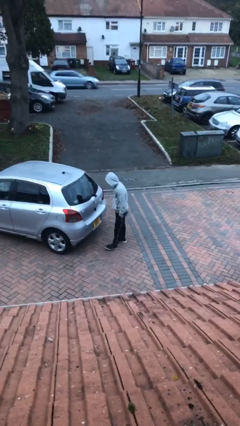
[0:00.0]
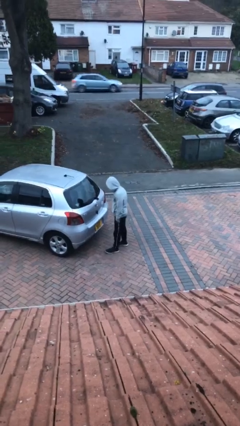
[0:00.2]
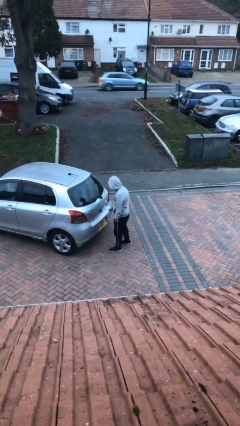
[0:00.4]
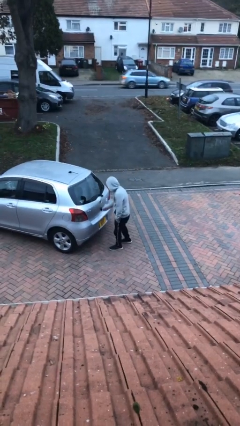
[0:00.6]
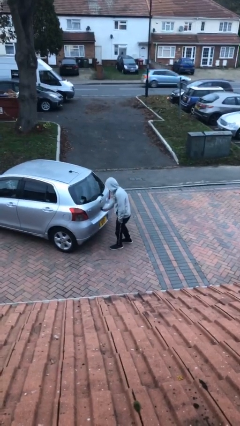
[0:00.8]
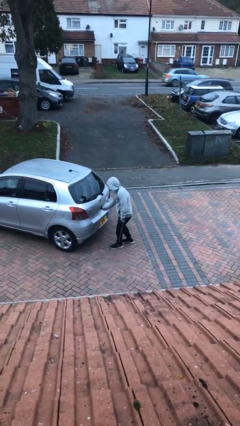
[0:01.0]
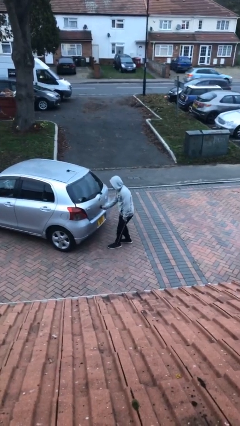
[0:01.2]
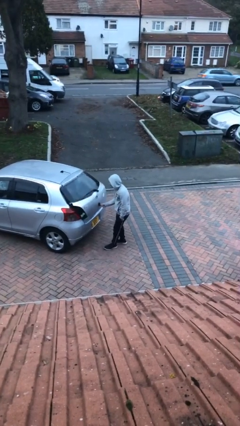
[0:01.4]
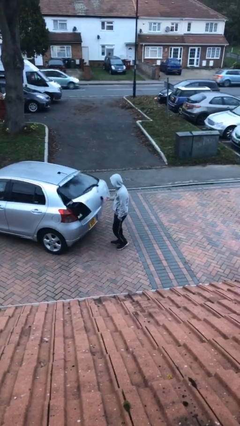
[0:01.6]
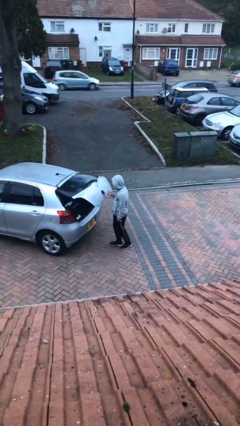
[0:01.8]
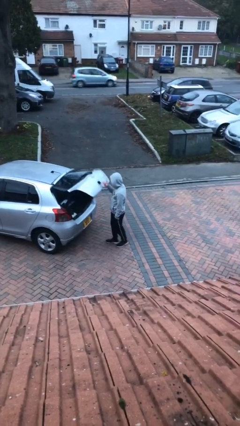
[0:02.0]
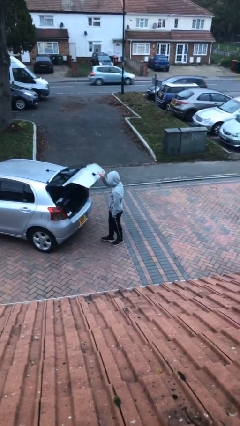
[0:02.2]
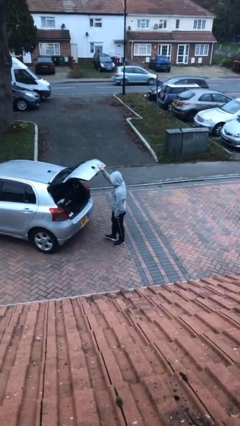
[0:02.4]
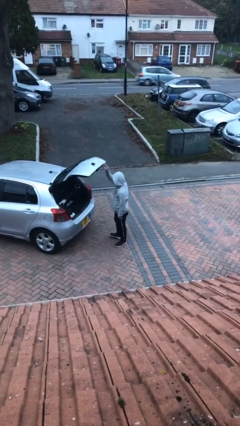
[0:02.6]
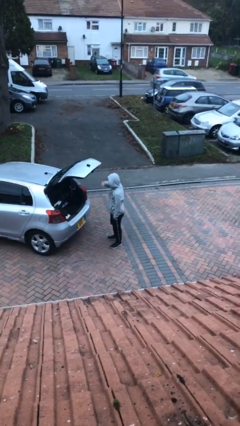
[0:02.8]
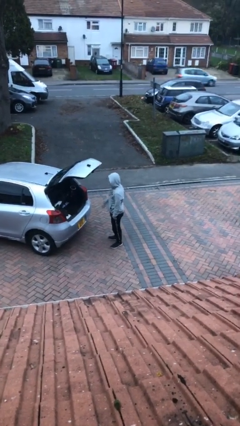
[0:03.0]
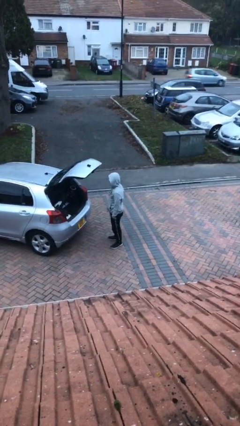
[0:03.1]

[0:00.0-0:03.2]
person opens car trunk

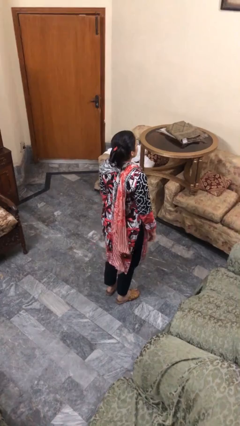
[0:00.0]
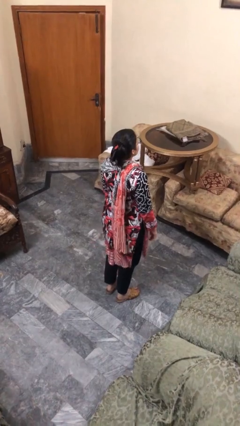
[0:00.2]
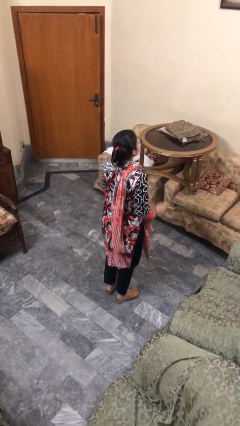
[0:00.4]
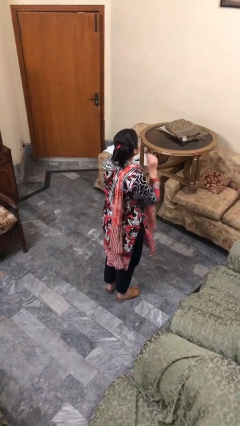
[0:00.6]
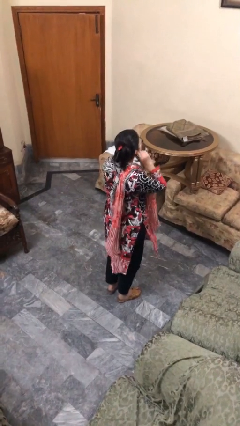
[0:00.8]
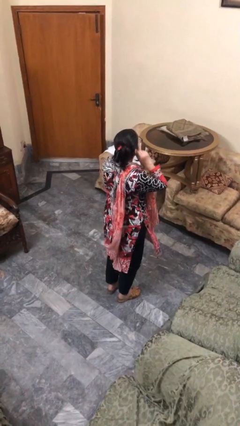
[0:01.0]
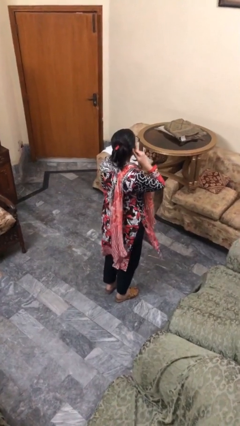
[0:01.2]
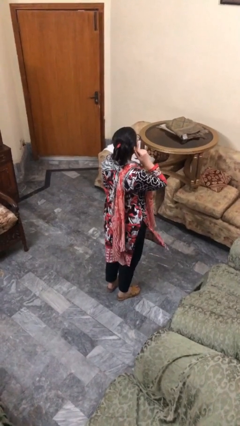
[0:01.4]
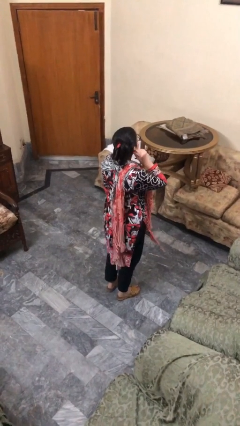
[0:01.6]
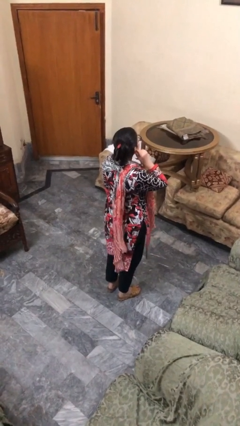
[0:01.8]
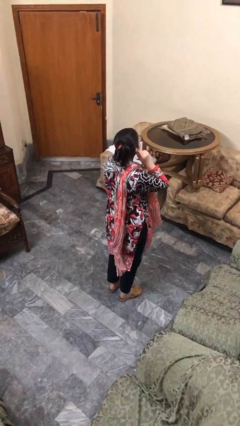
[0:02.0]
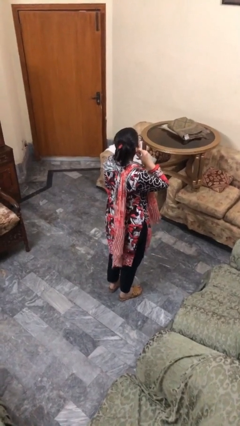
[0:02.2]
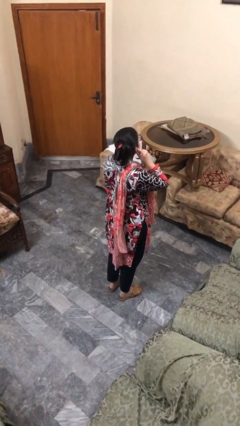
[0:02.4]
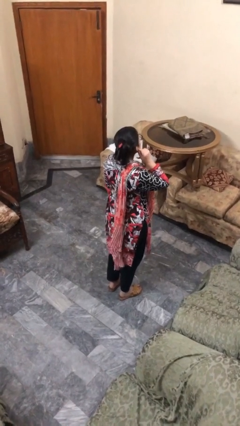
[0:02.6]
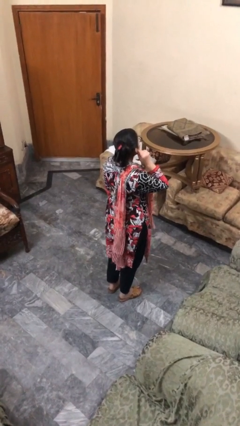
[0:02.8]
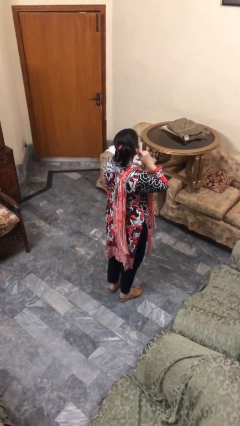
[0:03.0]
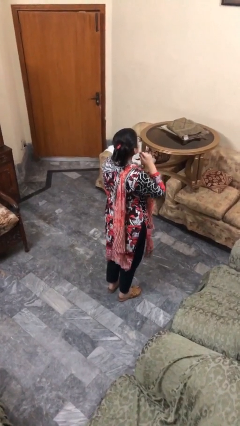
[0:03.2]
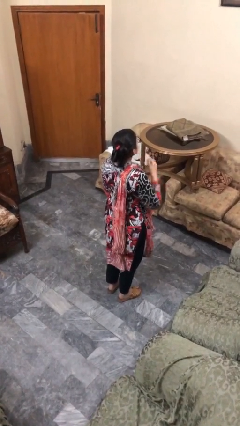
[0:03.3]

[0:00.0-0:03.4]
person touches earlobe

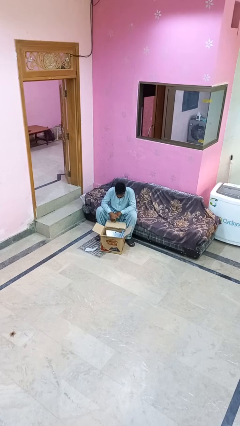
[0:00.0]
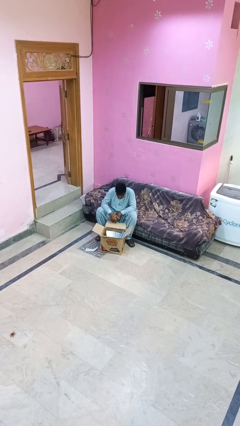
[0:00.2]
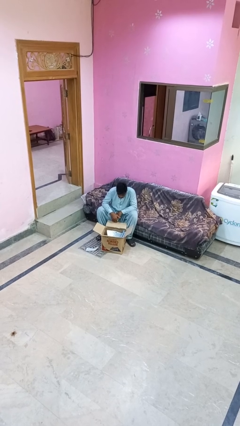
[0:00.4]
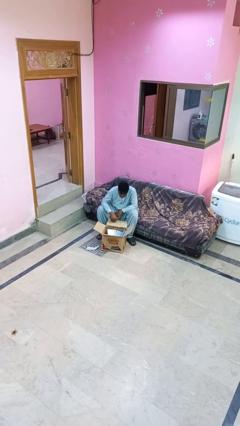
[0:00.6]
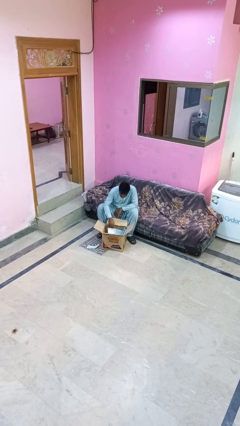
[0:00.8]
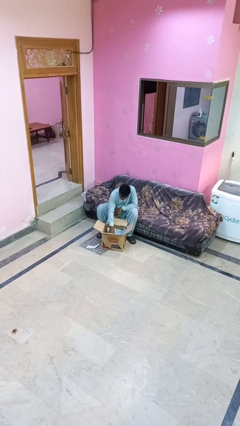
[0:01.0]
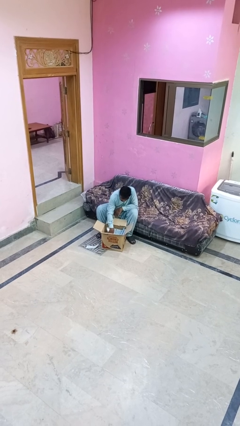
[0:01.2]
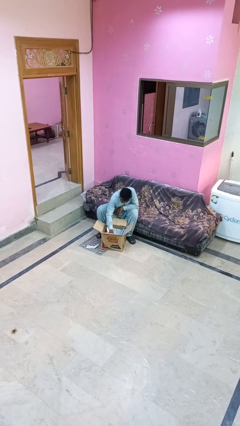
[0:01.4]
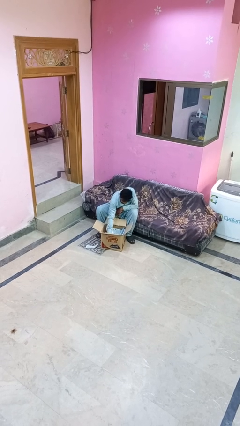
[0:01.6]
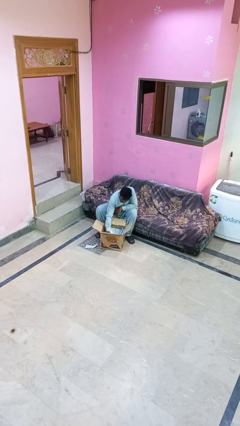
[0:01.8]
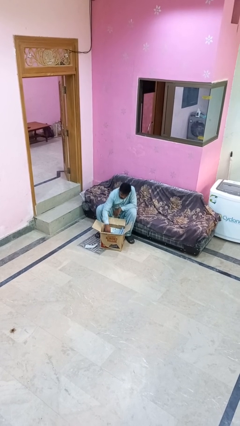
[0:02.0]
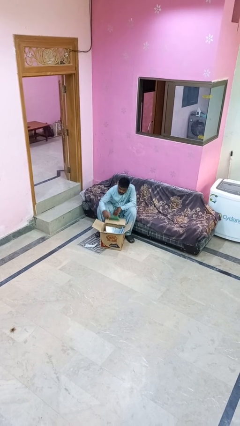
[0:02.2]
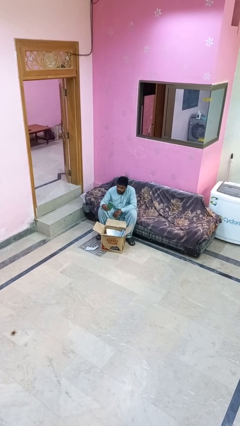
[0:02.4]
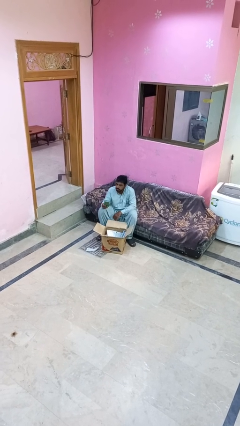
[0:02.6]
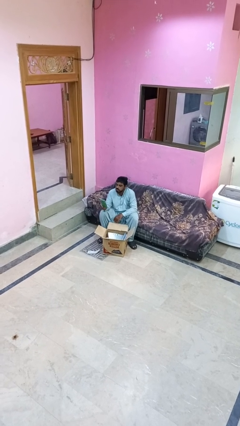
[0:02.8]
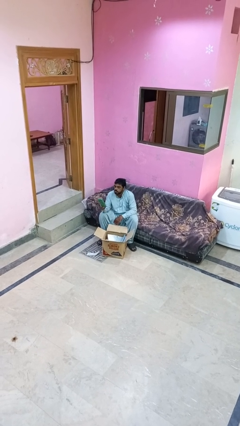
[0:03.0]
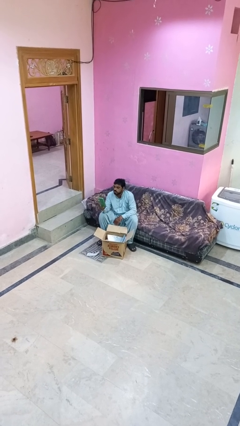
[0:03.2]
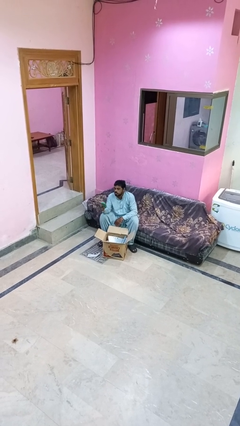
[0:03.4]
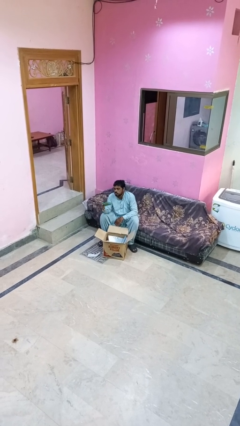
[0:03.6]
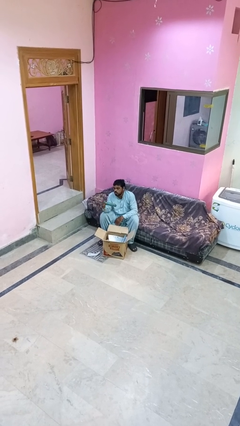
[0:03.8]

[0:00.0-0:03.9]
person takes object from box

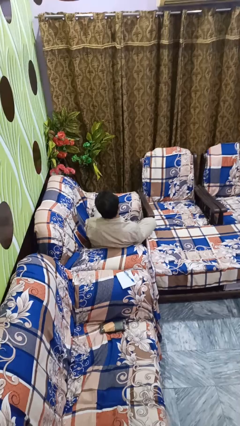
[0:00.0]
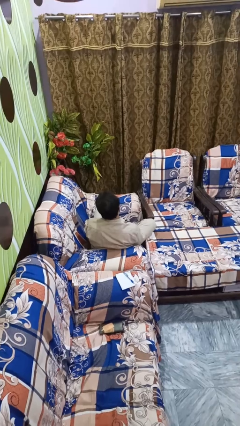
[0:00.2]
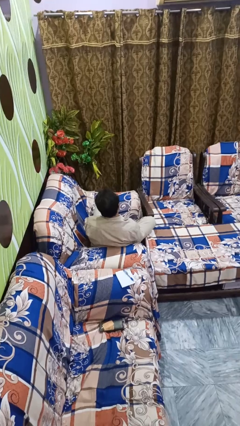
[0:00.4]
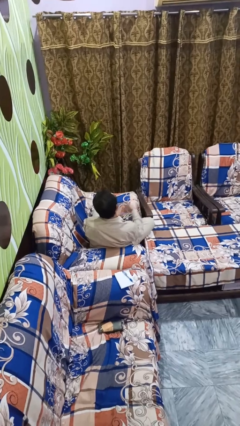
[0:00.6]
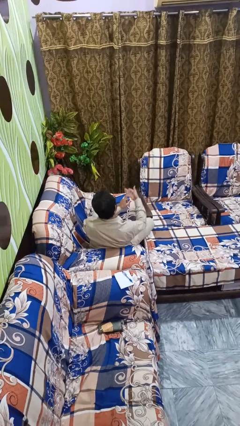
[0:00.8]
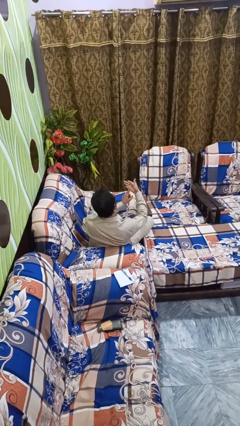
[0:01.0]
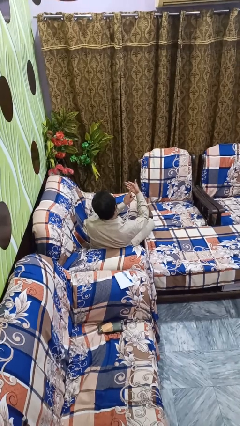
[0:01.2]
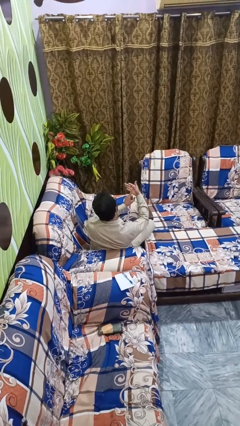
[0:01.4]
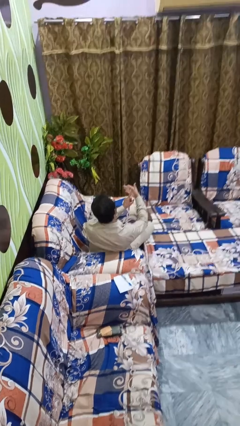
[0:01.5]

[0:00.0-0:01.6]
person gestures number one

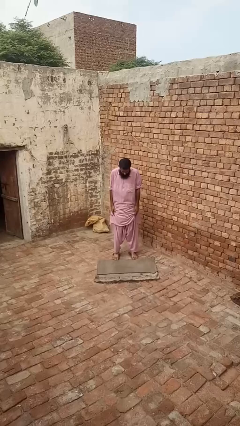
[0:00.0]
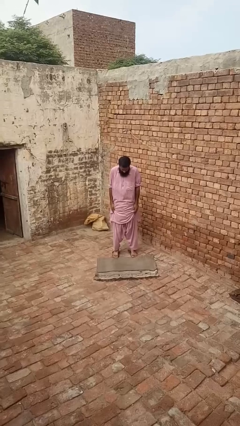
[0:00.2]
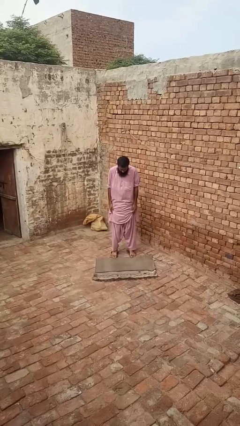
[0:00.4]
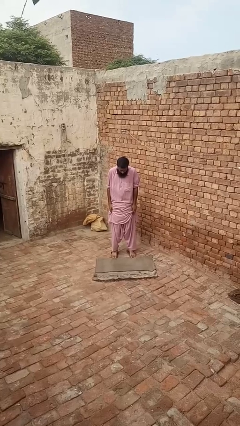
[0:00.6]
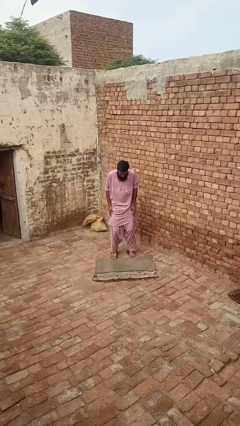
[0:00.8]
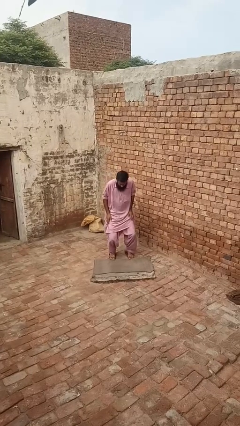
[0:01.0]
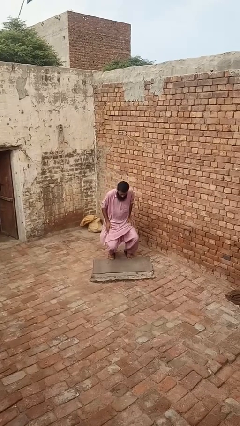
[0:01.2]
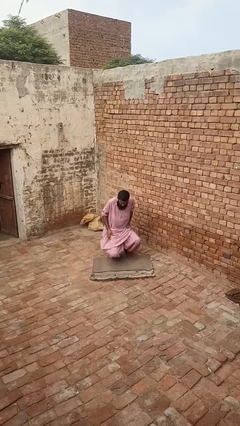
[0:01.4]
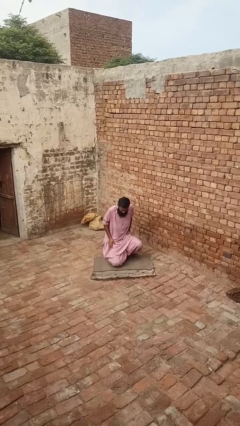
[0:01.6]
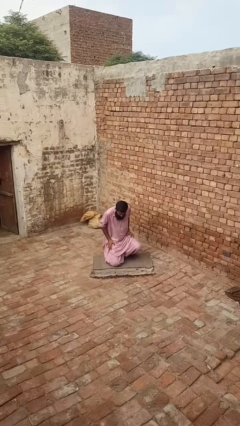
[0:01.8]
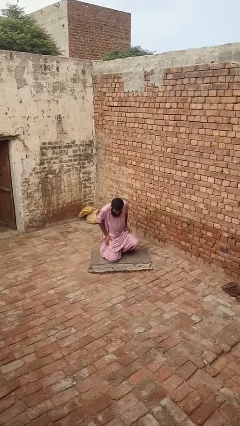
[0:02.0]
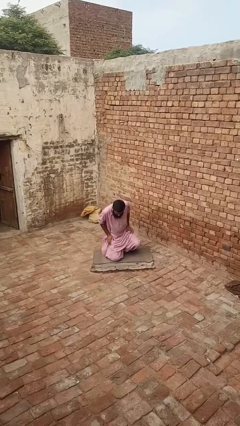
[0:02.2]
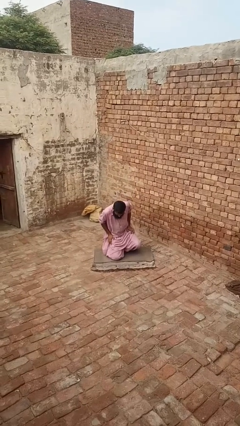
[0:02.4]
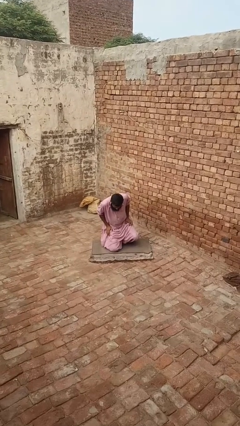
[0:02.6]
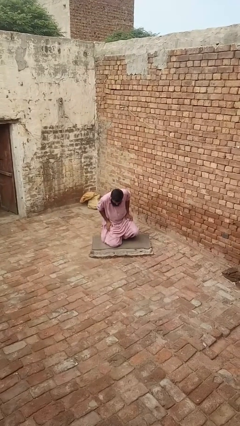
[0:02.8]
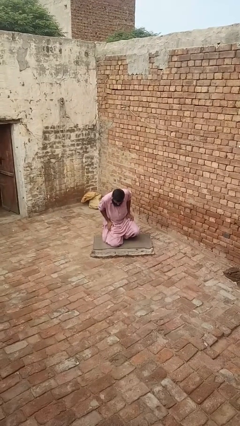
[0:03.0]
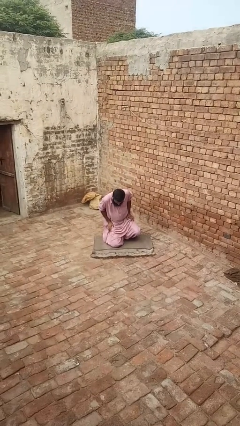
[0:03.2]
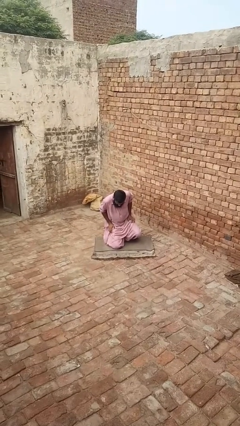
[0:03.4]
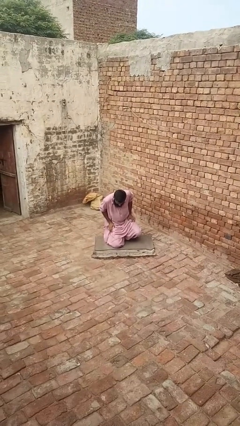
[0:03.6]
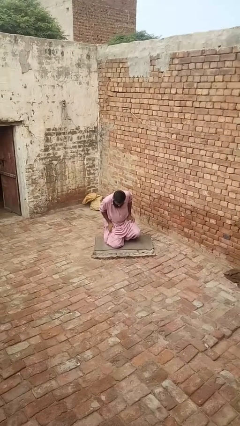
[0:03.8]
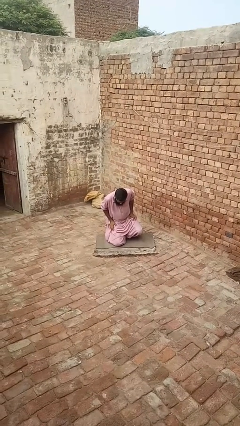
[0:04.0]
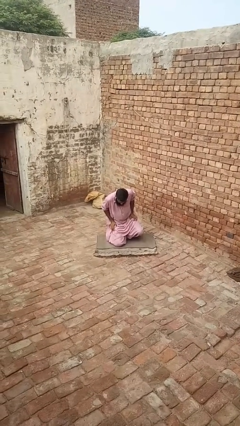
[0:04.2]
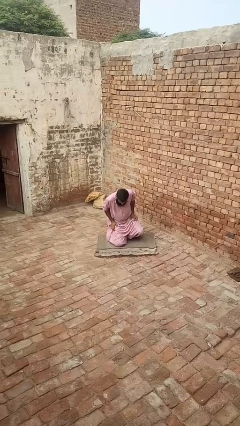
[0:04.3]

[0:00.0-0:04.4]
person kneels

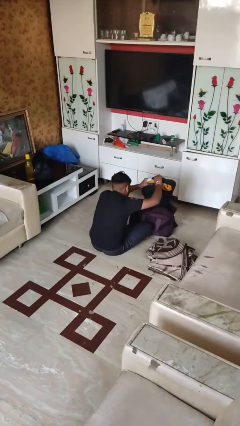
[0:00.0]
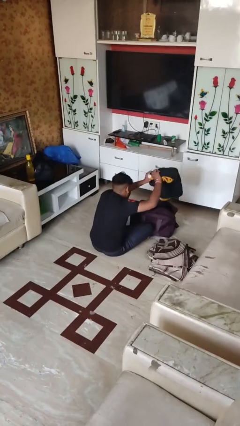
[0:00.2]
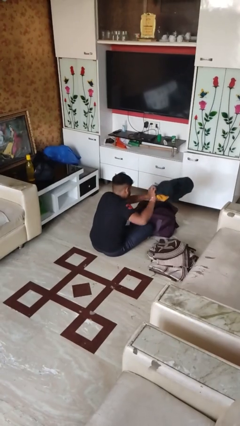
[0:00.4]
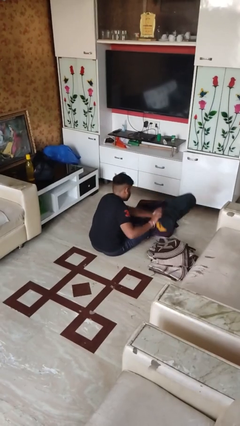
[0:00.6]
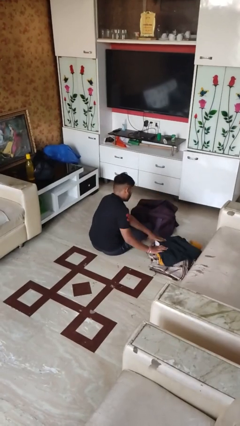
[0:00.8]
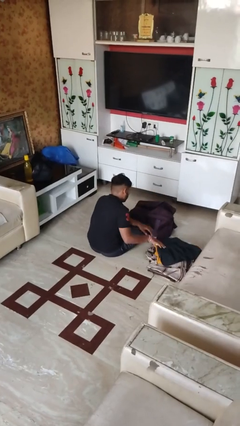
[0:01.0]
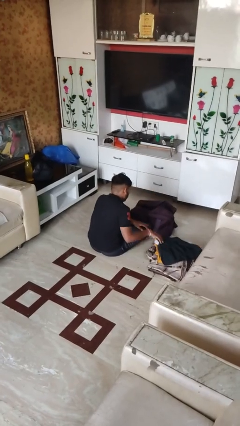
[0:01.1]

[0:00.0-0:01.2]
person unloads clothes from suitcase

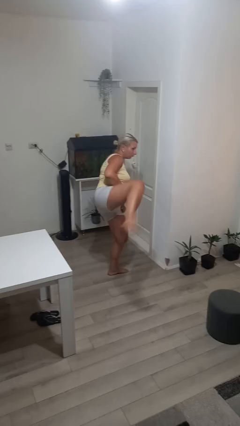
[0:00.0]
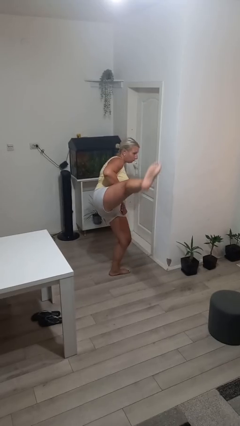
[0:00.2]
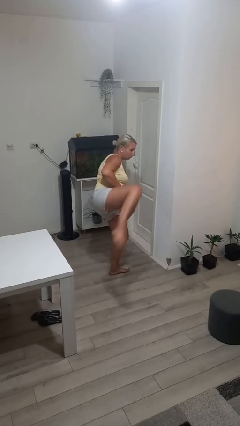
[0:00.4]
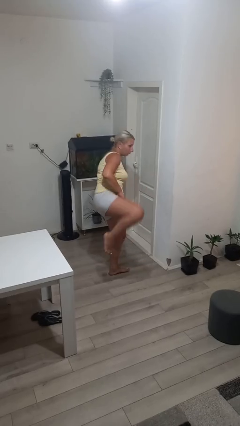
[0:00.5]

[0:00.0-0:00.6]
person karate kicks
